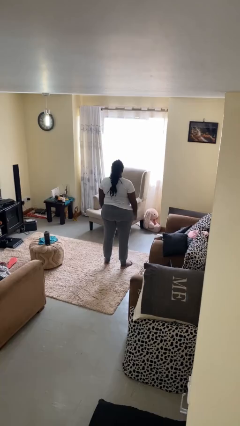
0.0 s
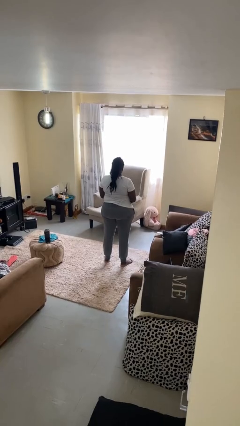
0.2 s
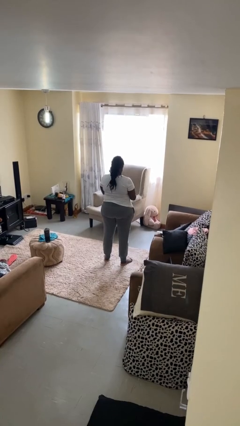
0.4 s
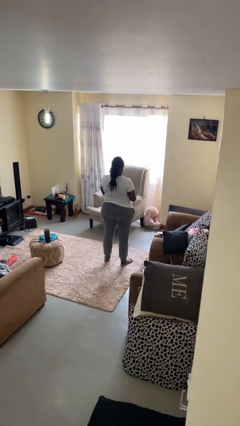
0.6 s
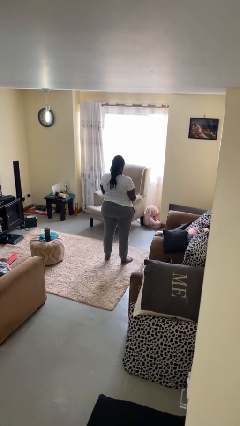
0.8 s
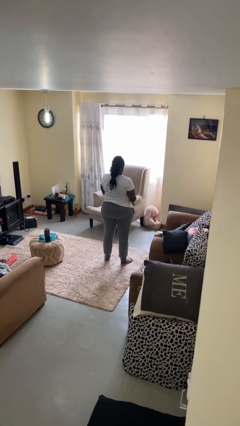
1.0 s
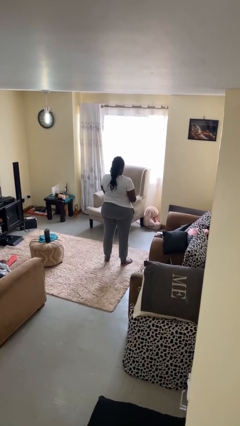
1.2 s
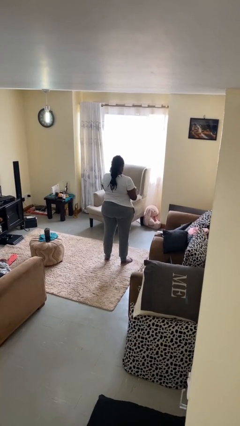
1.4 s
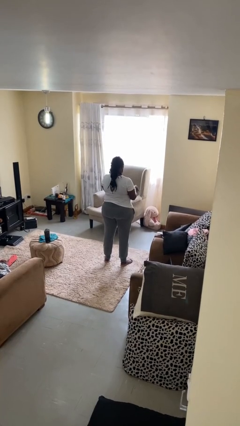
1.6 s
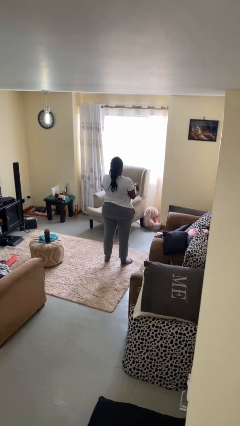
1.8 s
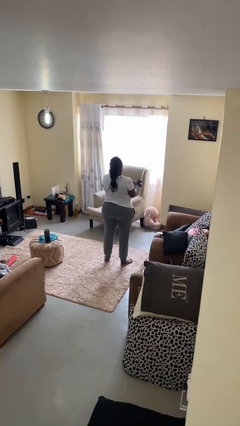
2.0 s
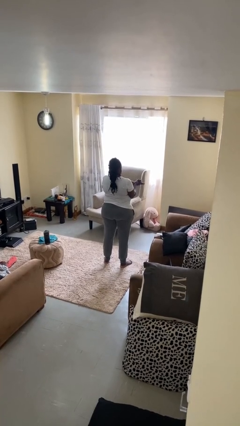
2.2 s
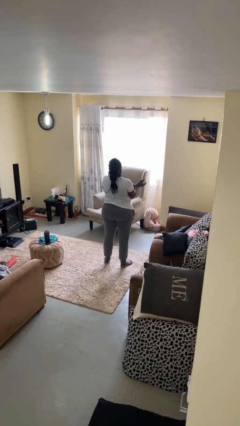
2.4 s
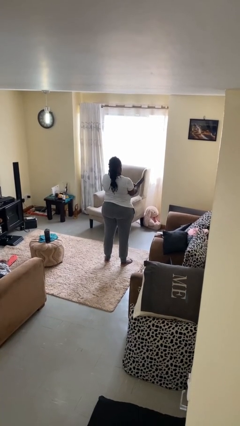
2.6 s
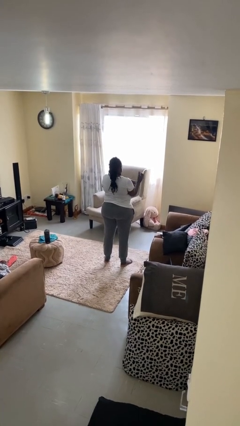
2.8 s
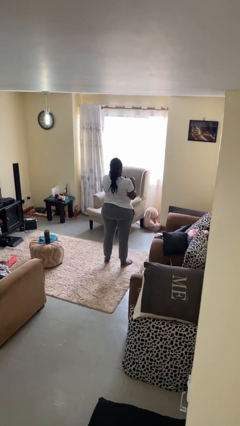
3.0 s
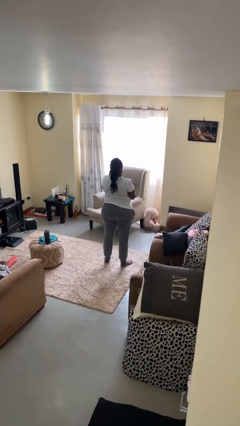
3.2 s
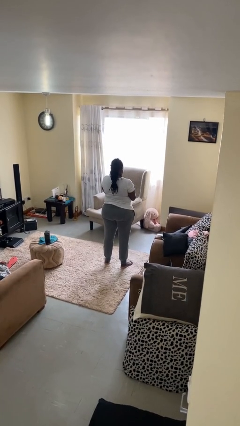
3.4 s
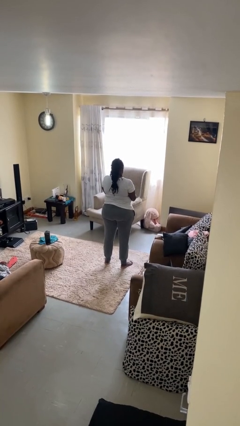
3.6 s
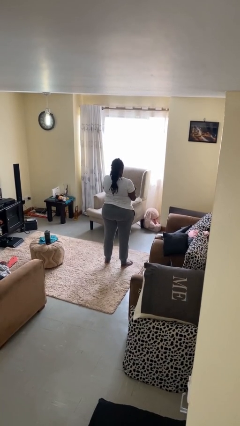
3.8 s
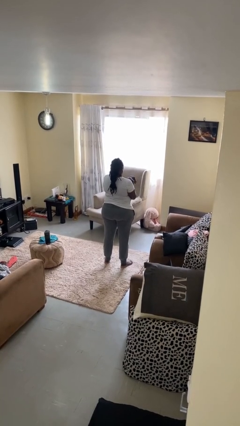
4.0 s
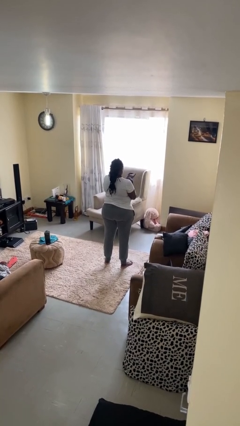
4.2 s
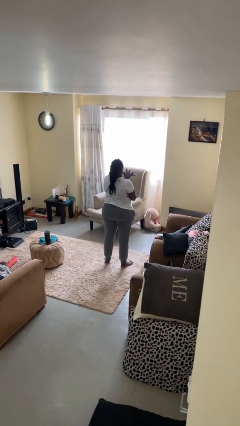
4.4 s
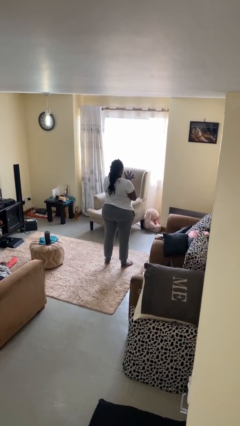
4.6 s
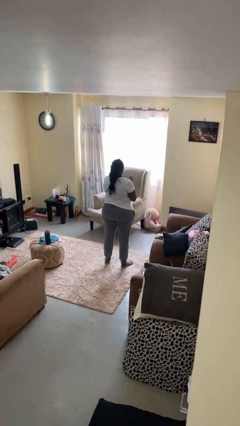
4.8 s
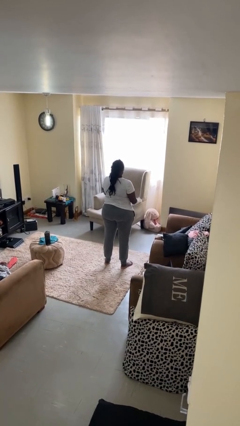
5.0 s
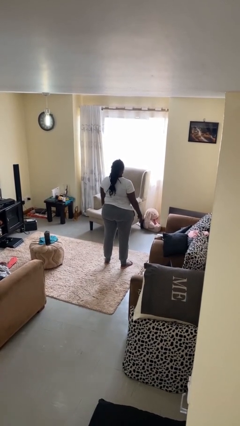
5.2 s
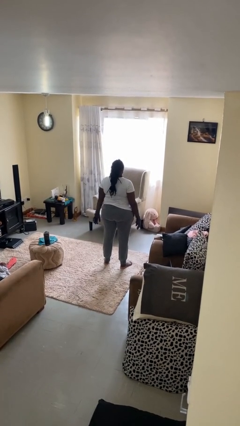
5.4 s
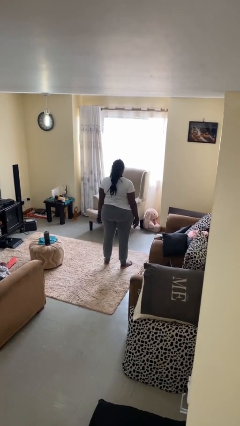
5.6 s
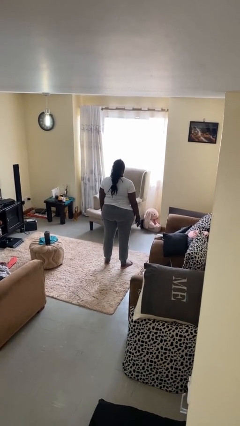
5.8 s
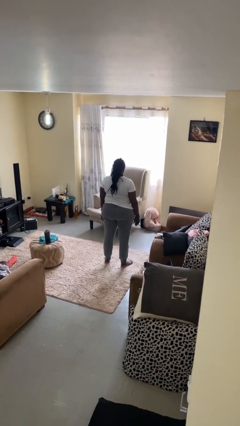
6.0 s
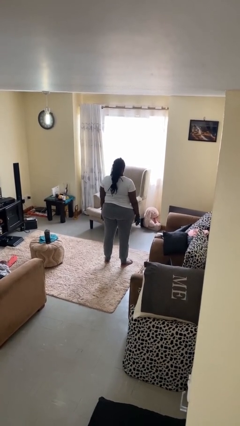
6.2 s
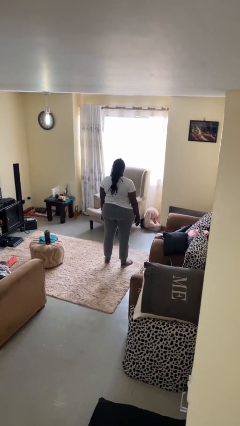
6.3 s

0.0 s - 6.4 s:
person puts on gloves

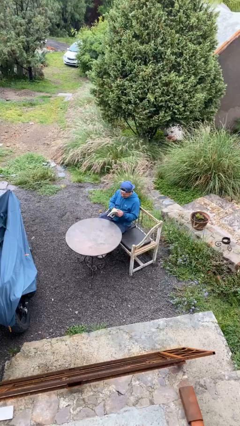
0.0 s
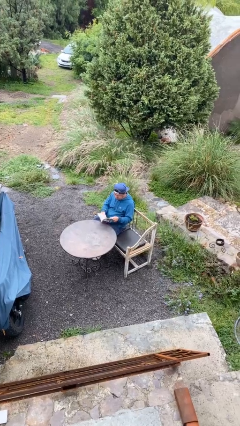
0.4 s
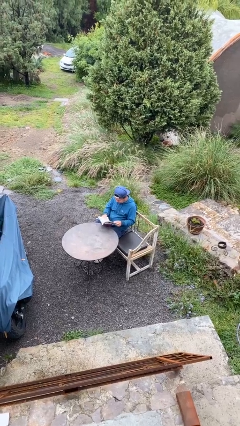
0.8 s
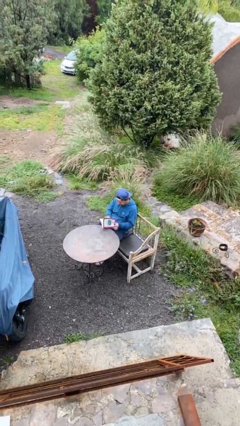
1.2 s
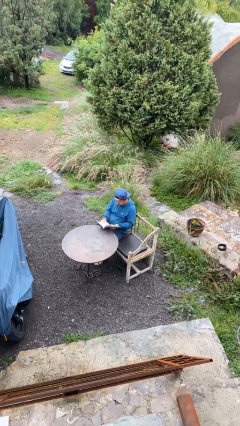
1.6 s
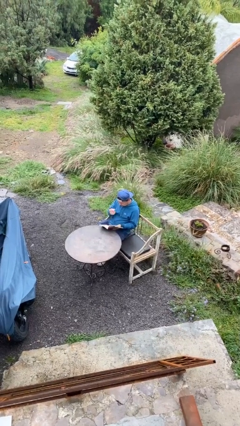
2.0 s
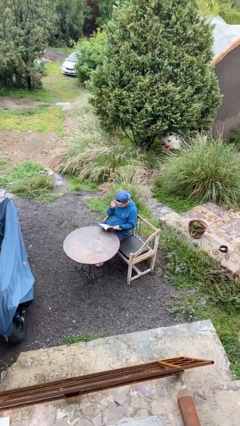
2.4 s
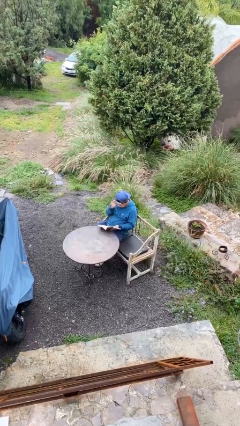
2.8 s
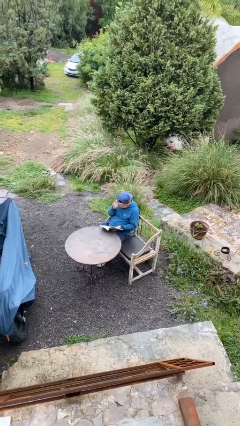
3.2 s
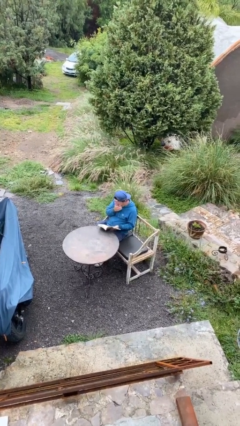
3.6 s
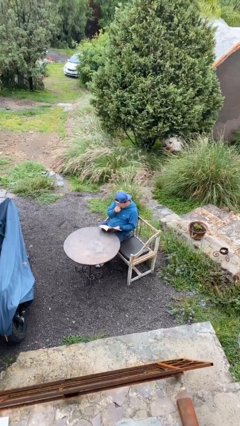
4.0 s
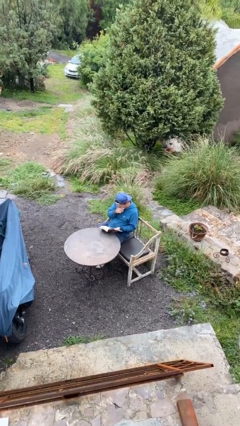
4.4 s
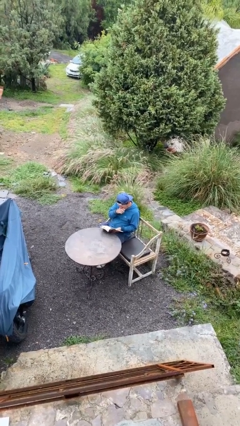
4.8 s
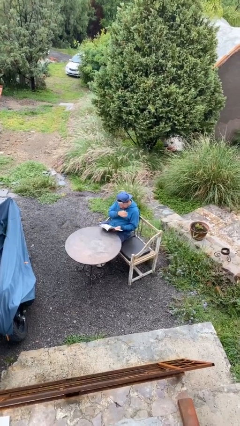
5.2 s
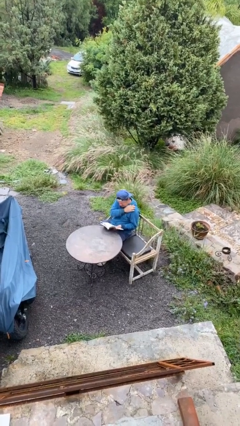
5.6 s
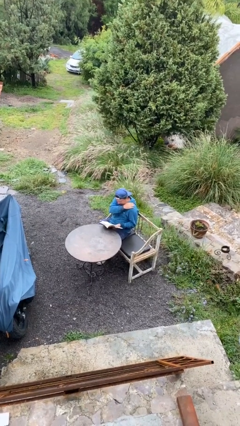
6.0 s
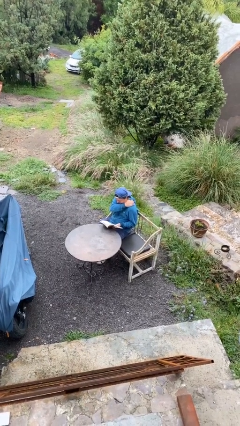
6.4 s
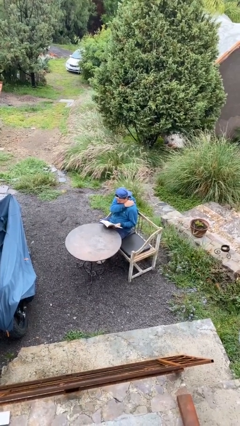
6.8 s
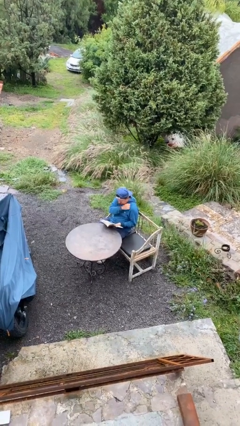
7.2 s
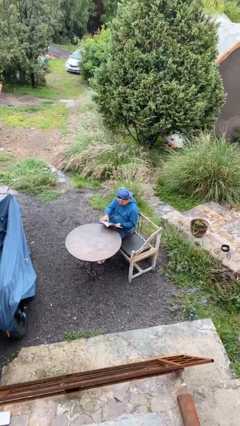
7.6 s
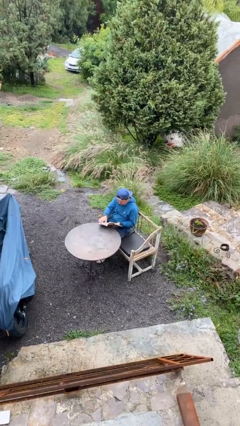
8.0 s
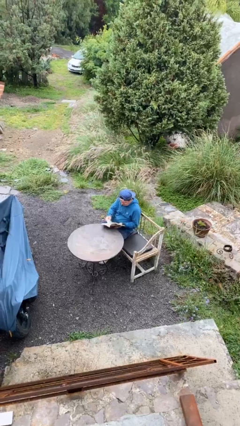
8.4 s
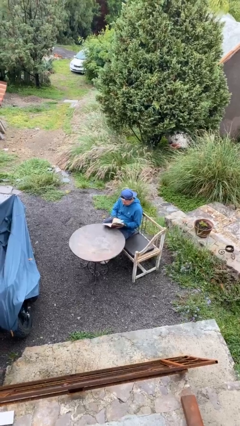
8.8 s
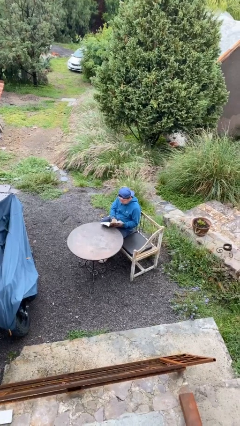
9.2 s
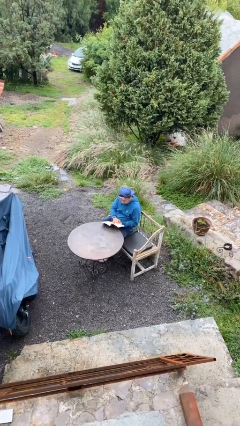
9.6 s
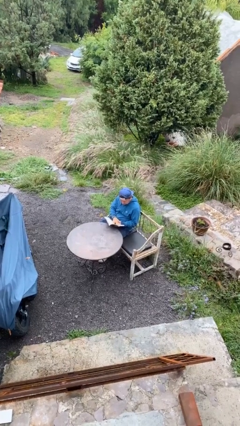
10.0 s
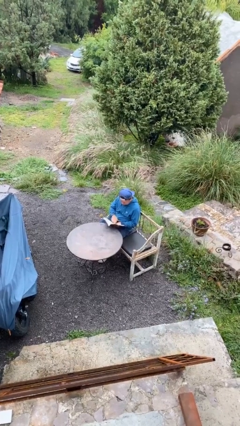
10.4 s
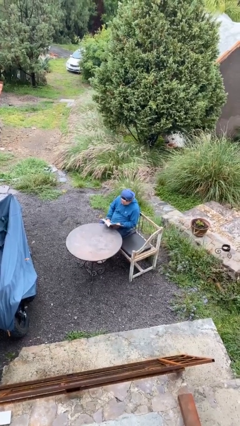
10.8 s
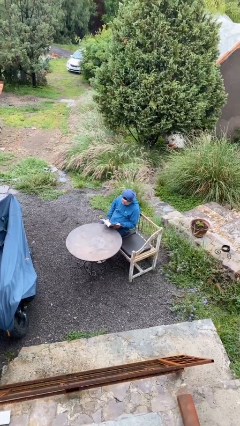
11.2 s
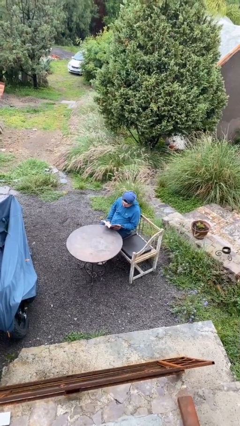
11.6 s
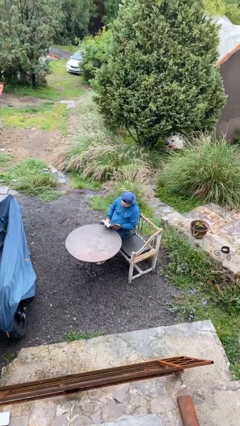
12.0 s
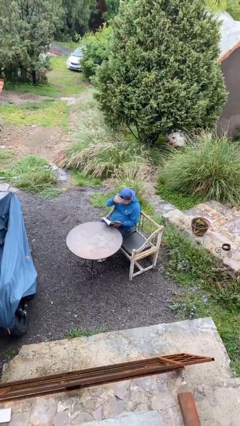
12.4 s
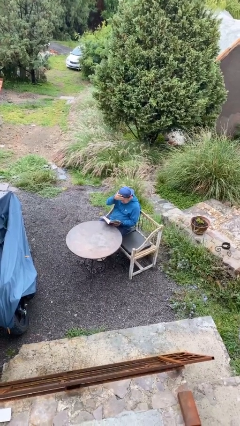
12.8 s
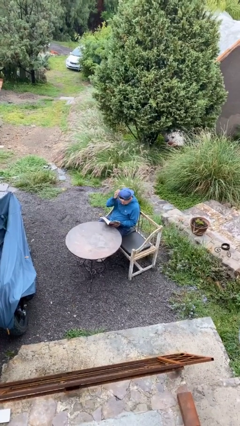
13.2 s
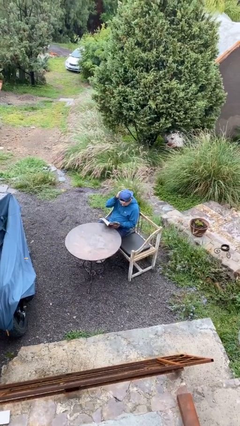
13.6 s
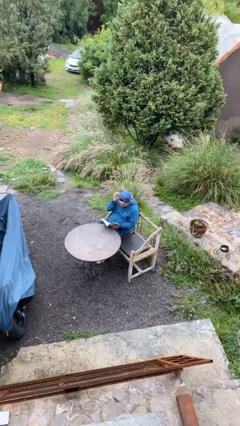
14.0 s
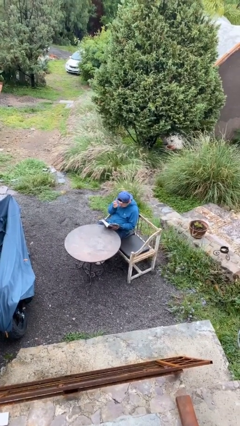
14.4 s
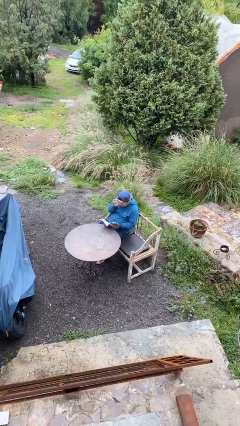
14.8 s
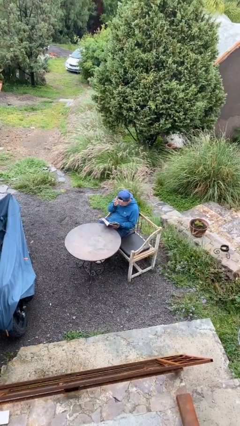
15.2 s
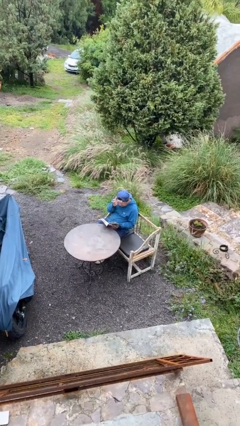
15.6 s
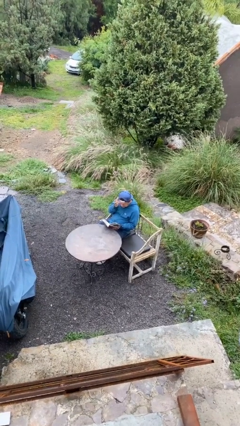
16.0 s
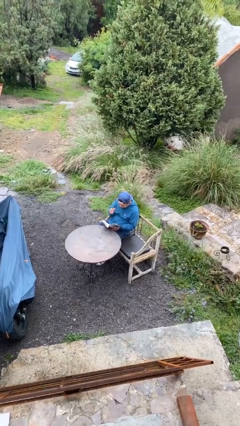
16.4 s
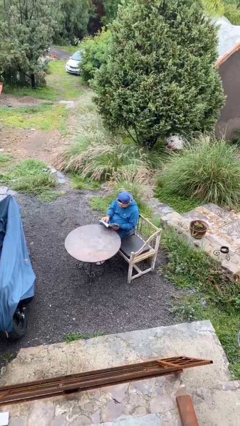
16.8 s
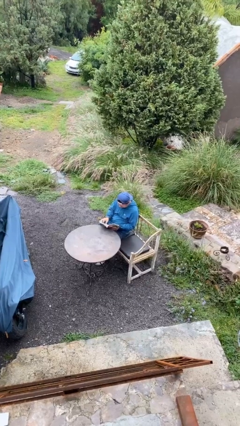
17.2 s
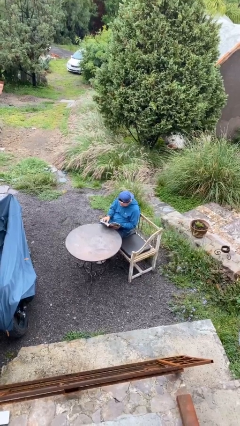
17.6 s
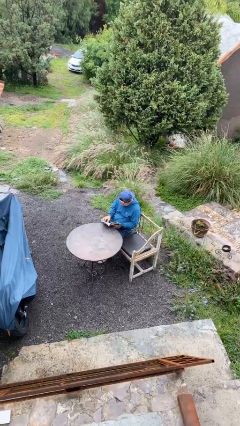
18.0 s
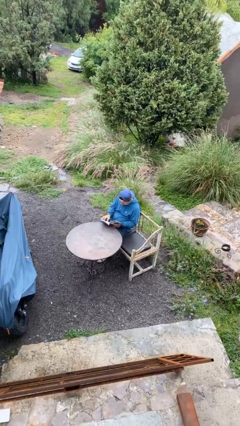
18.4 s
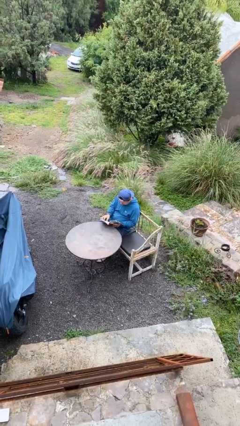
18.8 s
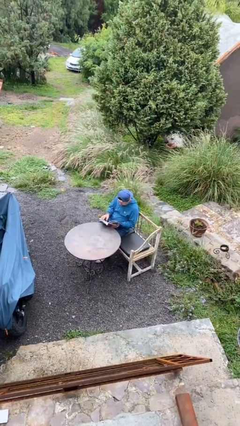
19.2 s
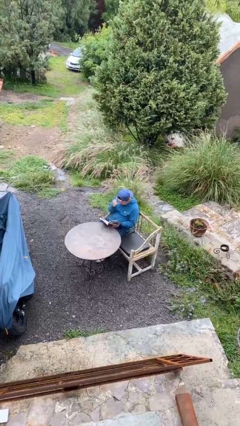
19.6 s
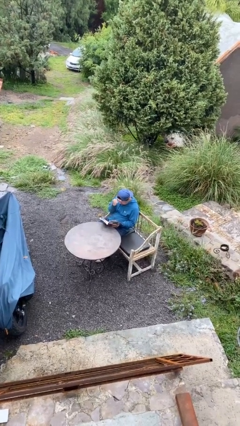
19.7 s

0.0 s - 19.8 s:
person reads document

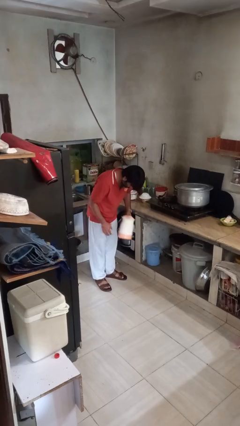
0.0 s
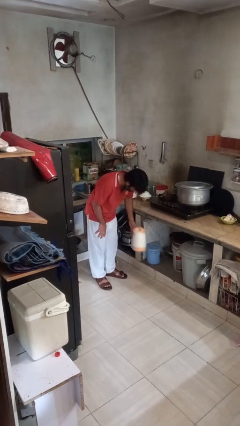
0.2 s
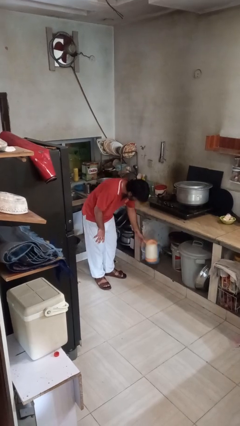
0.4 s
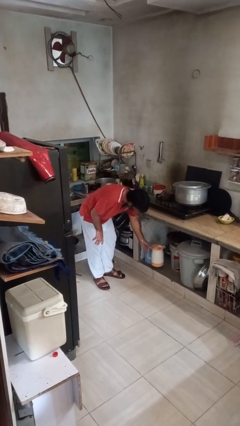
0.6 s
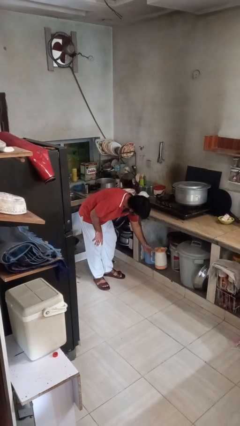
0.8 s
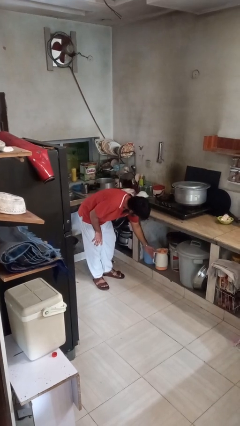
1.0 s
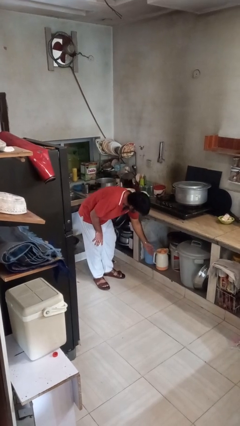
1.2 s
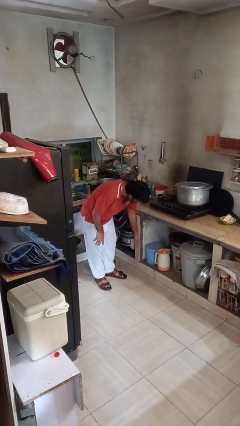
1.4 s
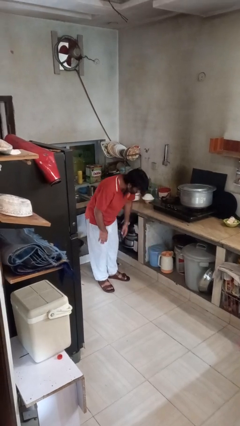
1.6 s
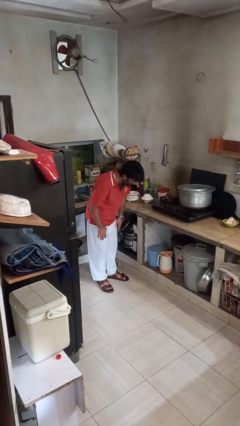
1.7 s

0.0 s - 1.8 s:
person puts down object into cabinet
